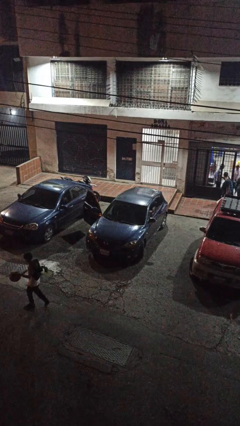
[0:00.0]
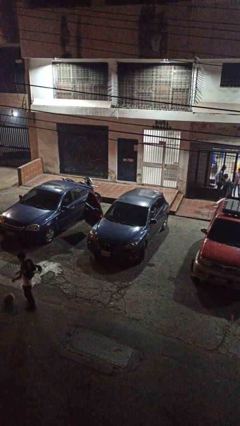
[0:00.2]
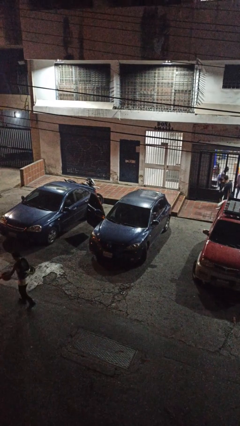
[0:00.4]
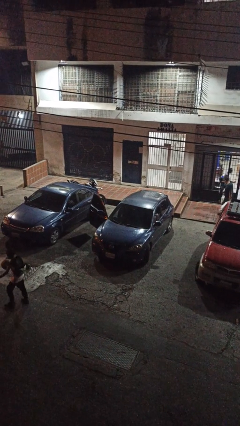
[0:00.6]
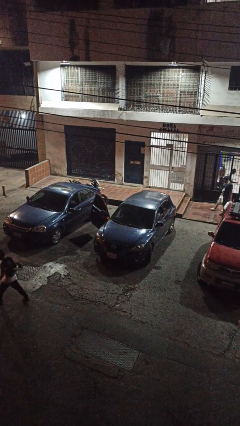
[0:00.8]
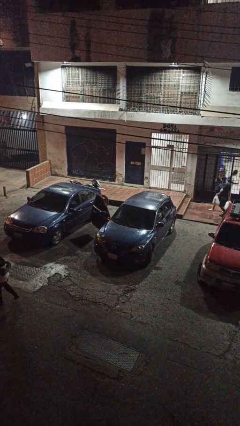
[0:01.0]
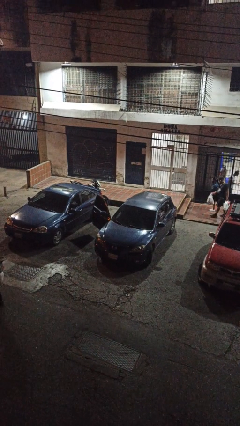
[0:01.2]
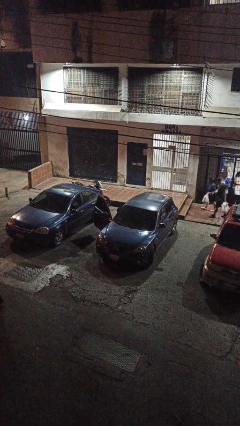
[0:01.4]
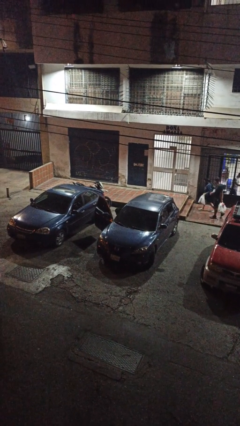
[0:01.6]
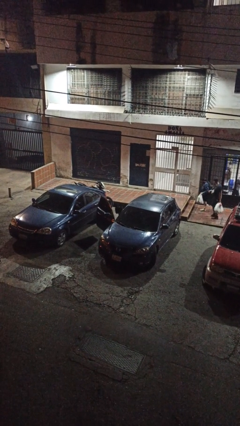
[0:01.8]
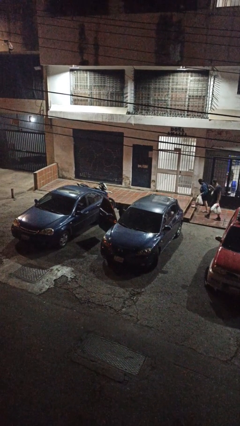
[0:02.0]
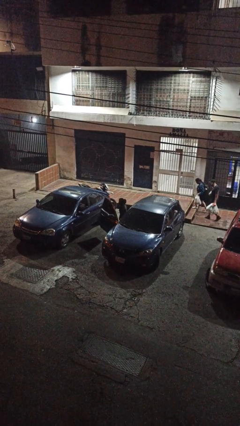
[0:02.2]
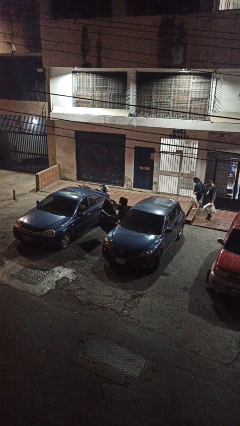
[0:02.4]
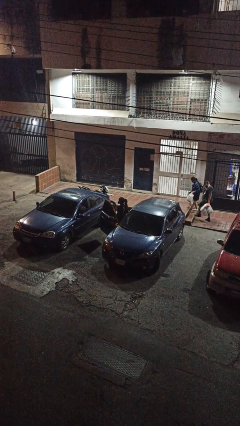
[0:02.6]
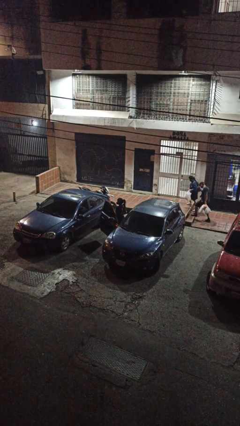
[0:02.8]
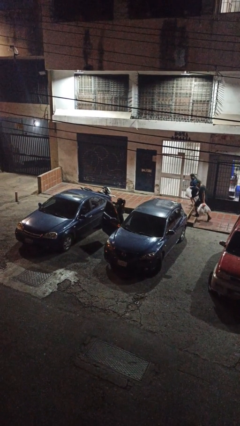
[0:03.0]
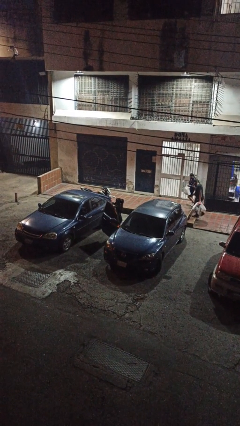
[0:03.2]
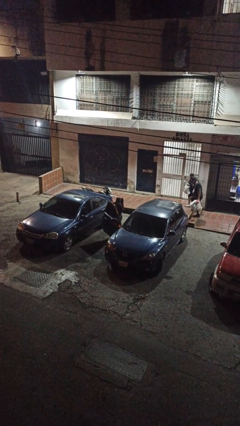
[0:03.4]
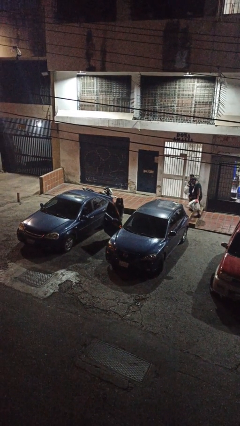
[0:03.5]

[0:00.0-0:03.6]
person exits car

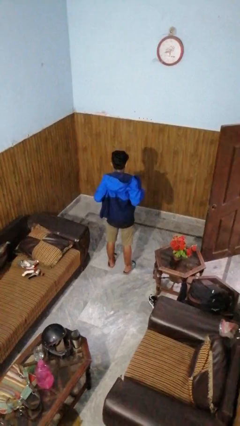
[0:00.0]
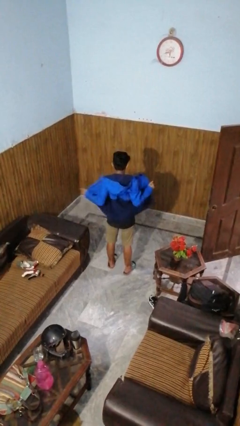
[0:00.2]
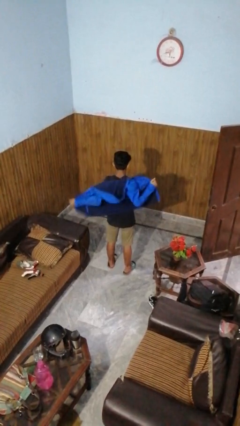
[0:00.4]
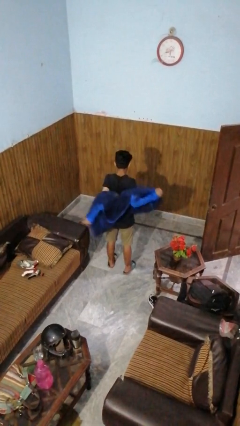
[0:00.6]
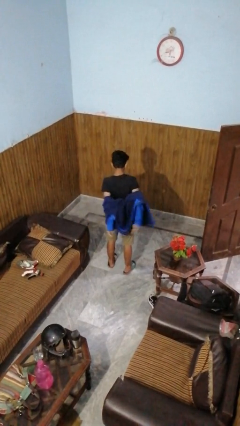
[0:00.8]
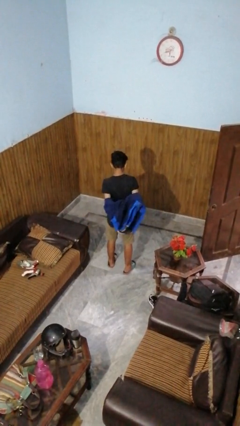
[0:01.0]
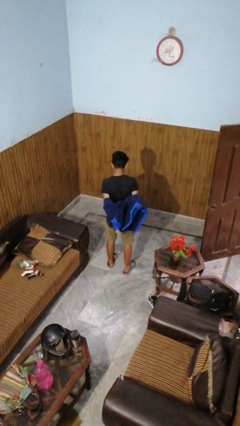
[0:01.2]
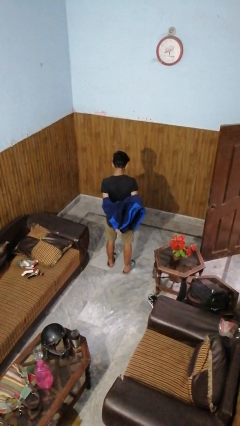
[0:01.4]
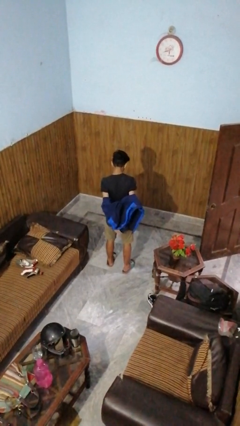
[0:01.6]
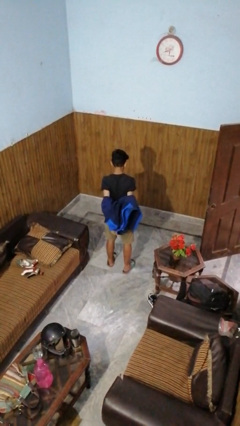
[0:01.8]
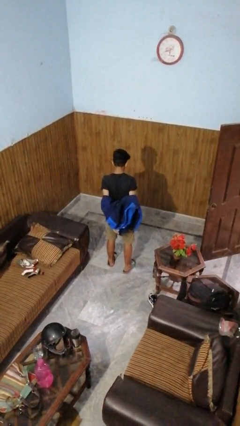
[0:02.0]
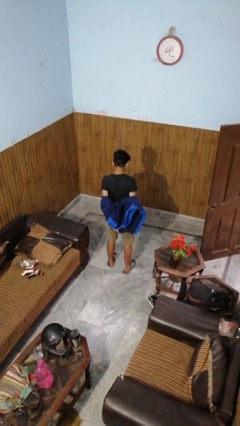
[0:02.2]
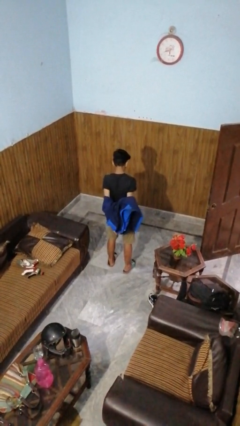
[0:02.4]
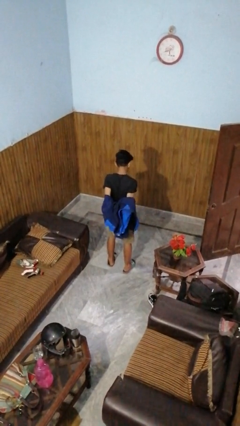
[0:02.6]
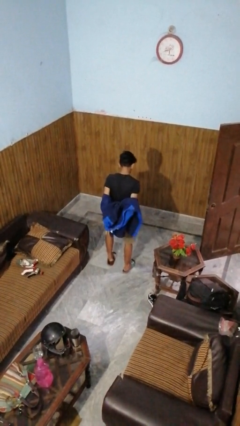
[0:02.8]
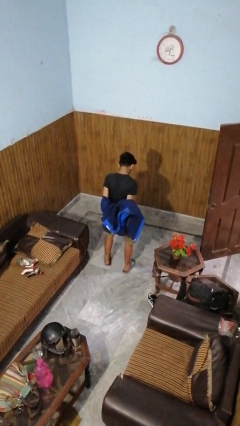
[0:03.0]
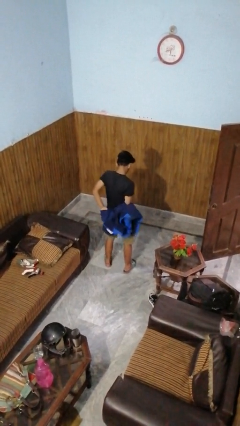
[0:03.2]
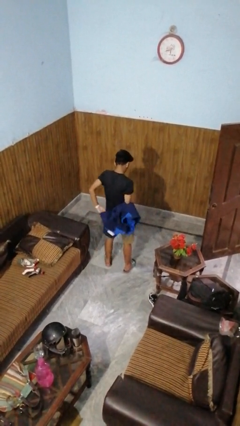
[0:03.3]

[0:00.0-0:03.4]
person takes off jacket

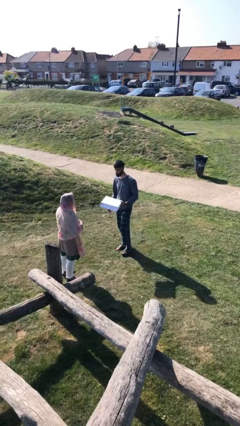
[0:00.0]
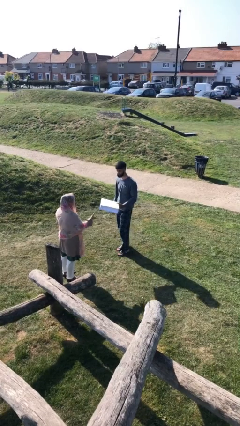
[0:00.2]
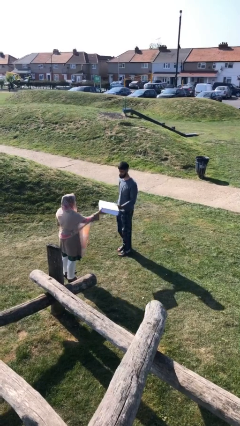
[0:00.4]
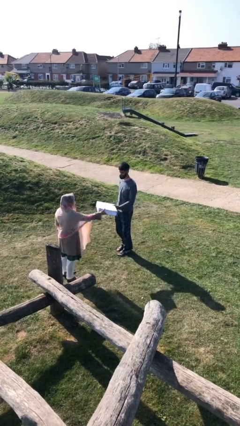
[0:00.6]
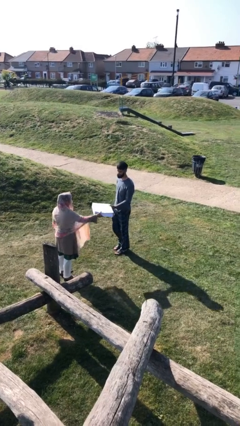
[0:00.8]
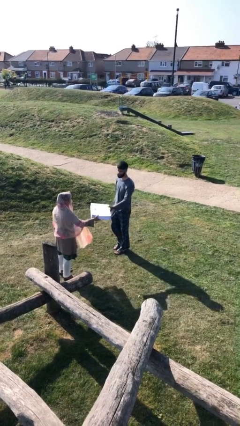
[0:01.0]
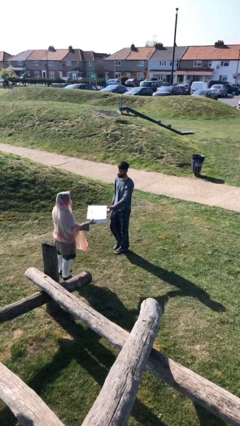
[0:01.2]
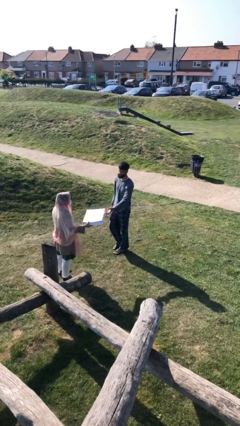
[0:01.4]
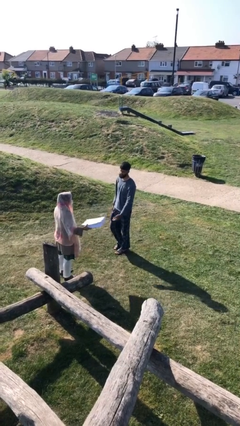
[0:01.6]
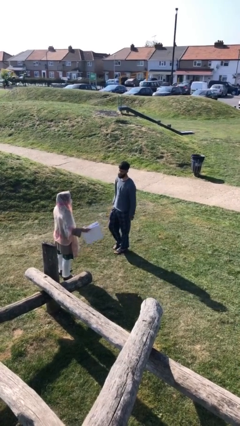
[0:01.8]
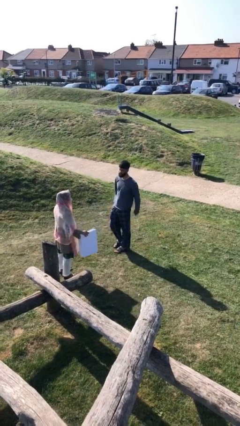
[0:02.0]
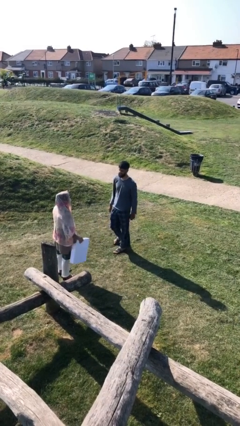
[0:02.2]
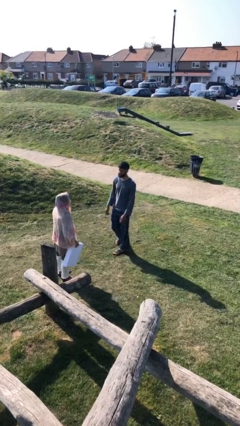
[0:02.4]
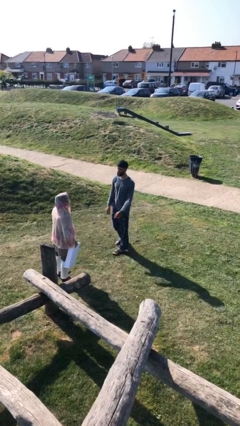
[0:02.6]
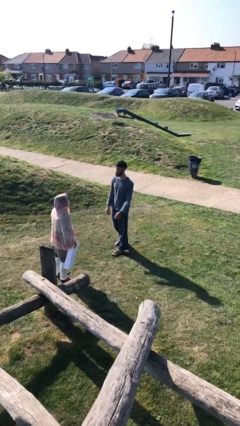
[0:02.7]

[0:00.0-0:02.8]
person transfers object to person

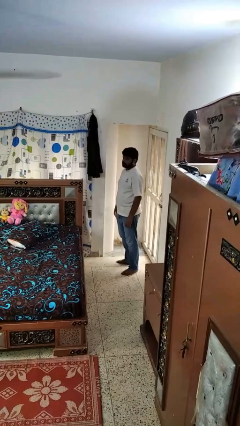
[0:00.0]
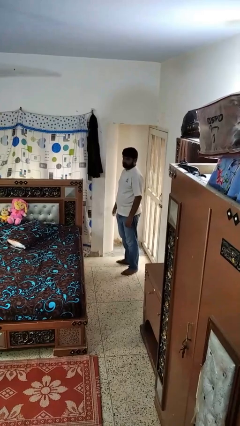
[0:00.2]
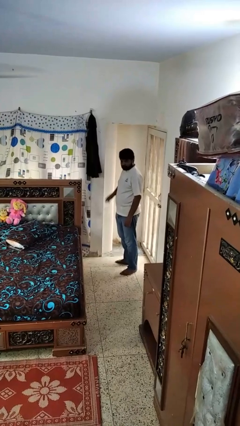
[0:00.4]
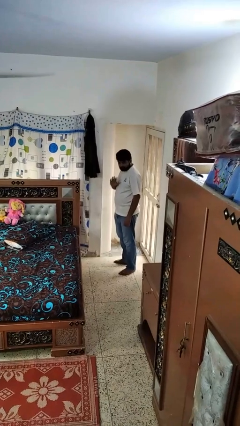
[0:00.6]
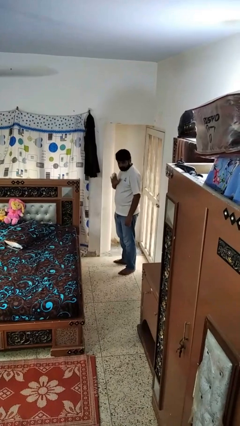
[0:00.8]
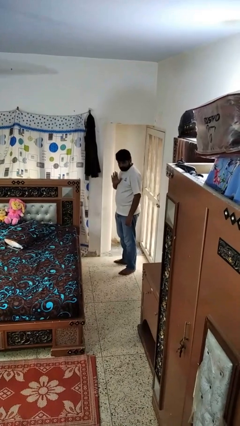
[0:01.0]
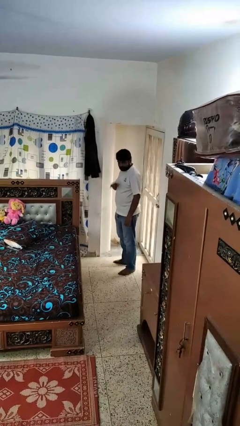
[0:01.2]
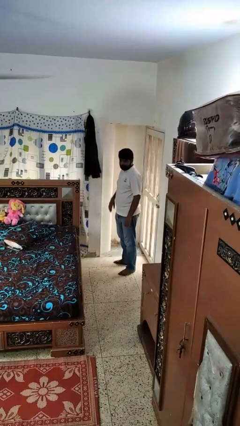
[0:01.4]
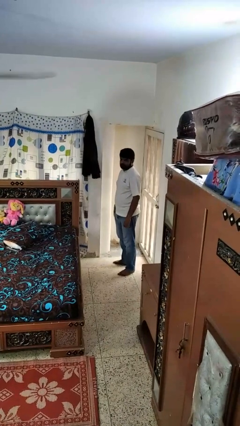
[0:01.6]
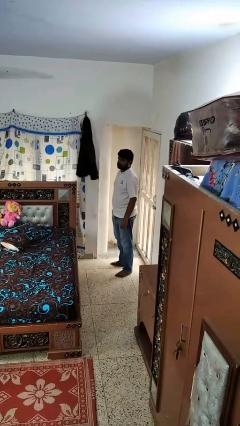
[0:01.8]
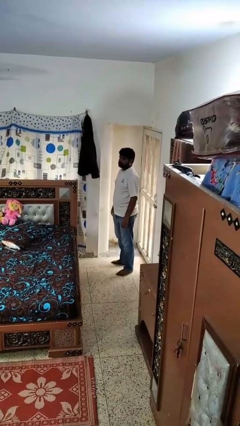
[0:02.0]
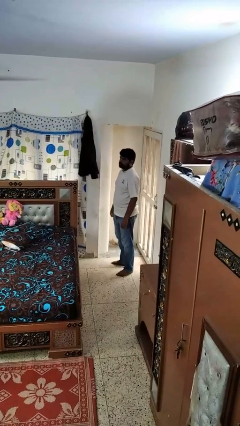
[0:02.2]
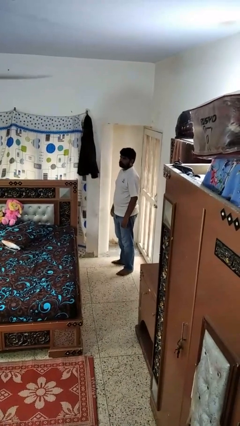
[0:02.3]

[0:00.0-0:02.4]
person waves at person

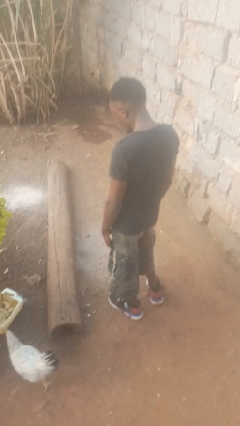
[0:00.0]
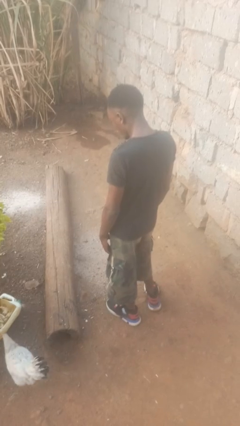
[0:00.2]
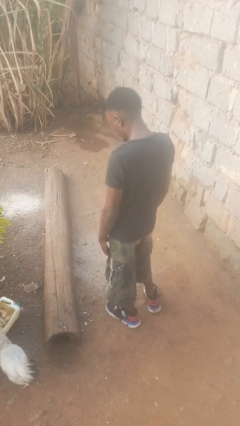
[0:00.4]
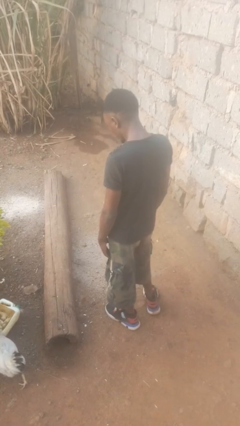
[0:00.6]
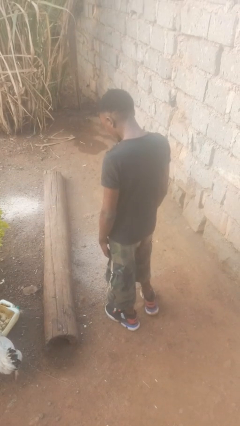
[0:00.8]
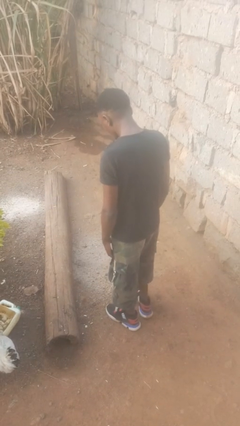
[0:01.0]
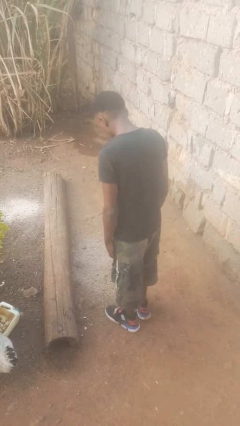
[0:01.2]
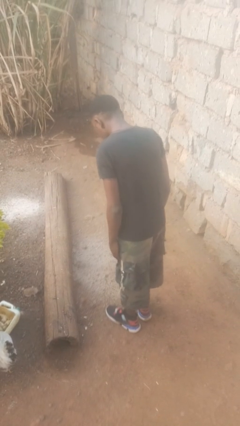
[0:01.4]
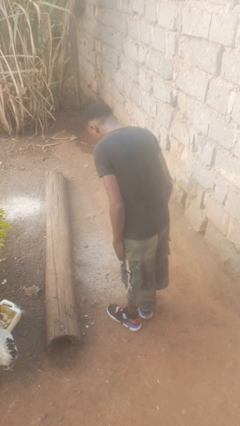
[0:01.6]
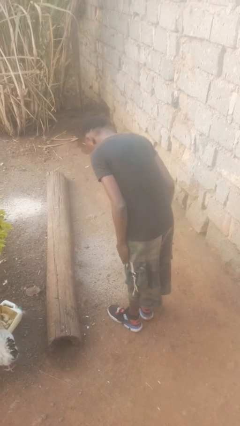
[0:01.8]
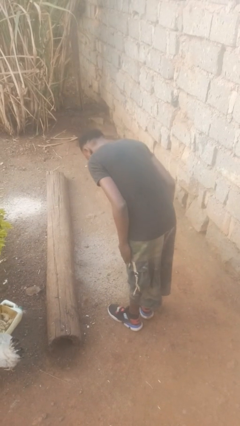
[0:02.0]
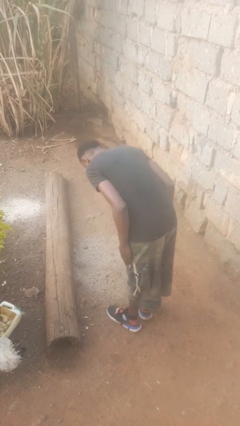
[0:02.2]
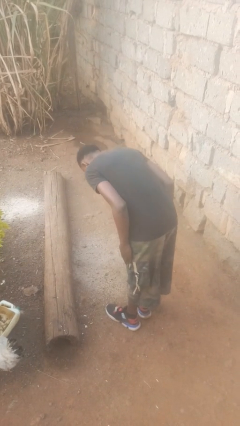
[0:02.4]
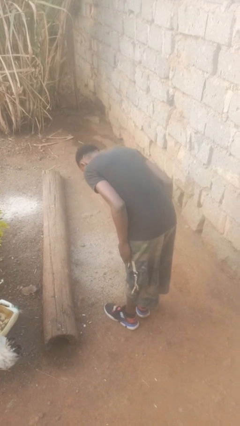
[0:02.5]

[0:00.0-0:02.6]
person bows

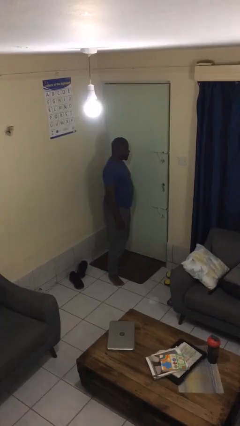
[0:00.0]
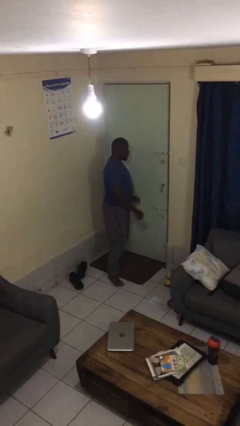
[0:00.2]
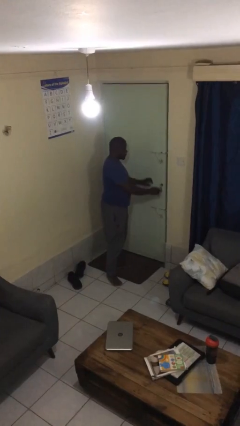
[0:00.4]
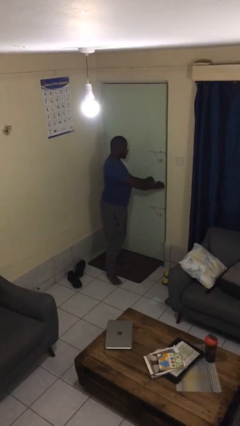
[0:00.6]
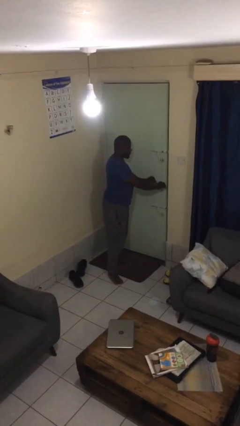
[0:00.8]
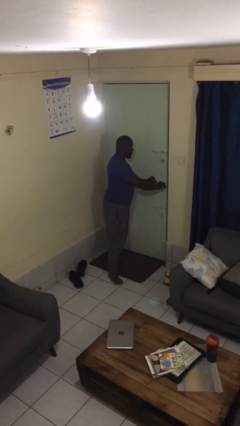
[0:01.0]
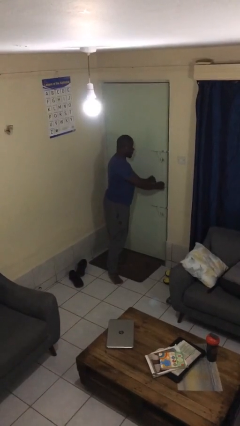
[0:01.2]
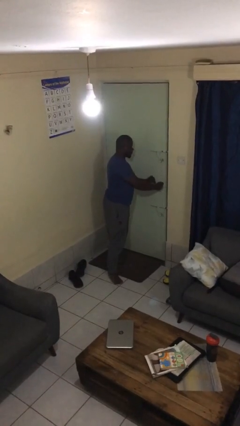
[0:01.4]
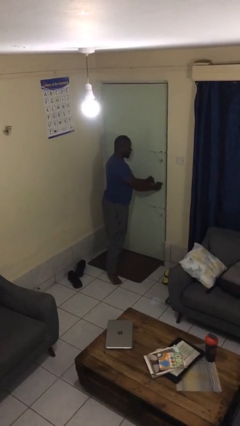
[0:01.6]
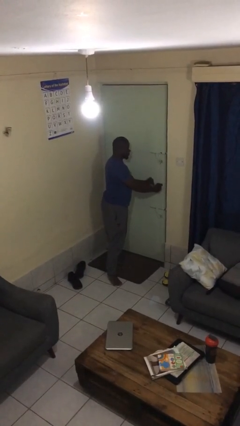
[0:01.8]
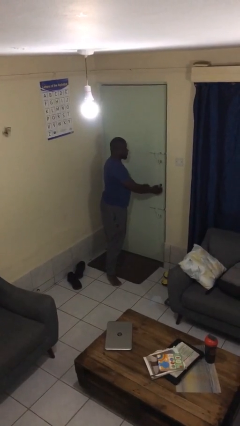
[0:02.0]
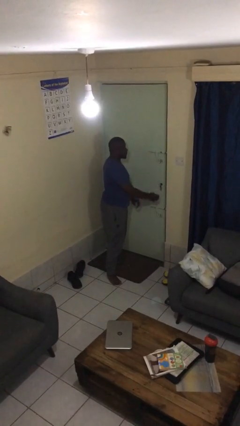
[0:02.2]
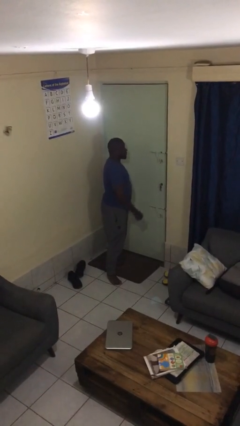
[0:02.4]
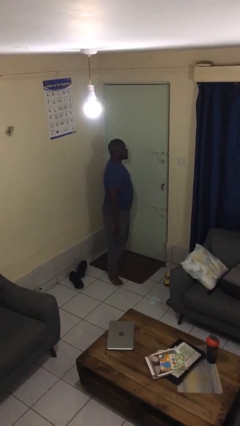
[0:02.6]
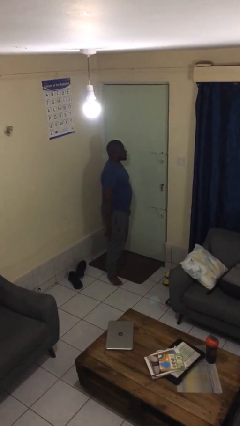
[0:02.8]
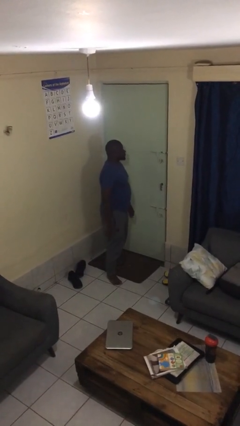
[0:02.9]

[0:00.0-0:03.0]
person locks door with keys
